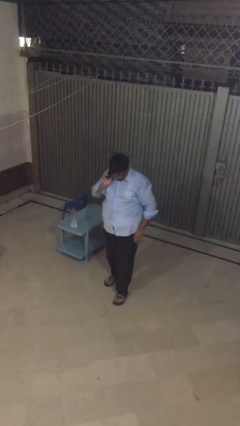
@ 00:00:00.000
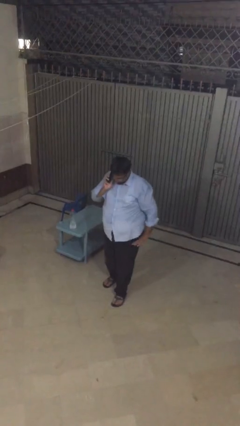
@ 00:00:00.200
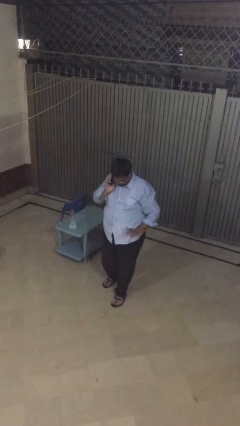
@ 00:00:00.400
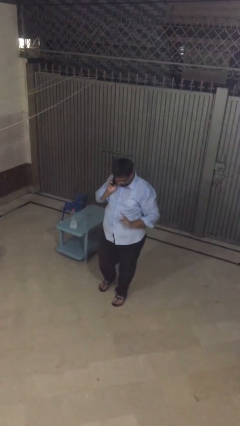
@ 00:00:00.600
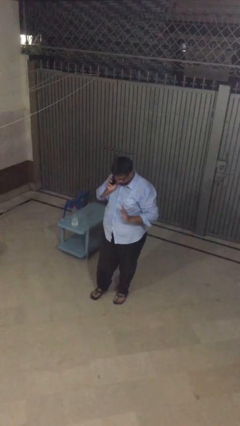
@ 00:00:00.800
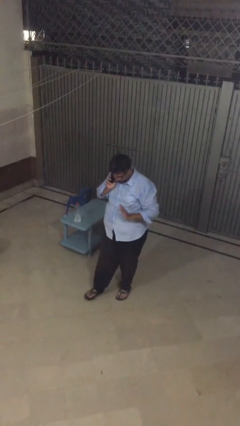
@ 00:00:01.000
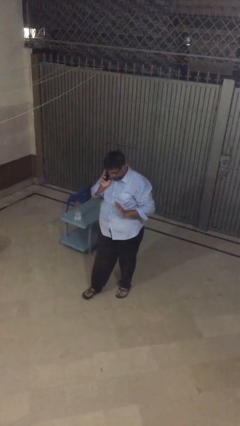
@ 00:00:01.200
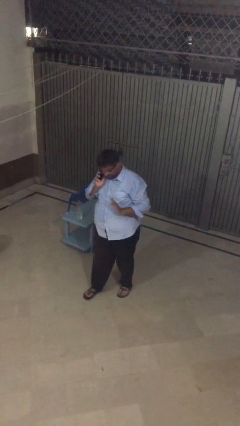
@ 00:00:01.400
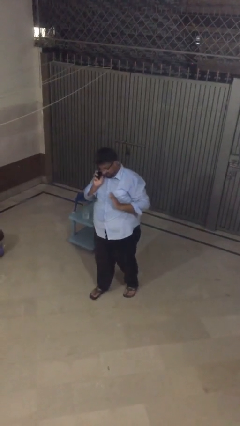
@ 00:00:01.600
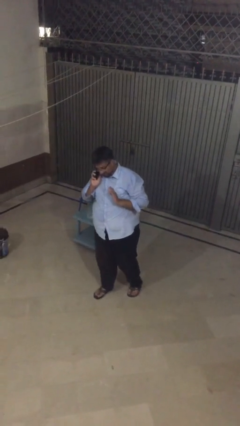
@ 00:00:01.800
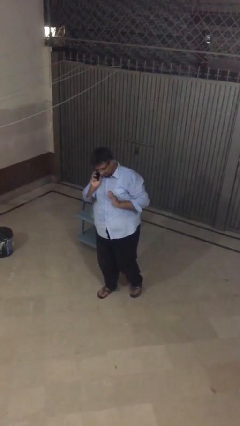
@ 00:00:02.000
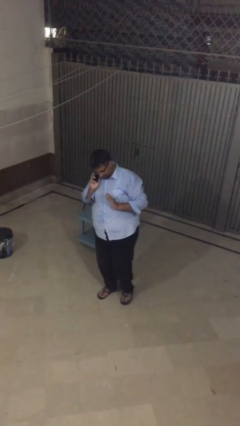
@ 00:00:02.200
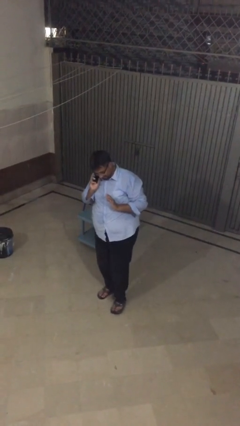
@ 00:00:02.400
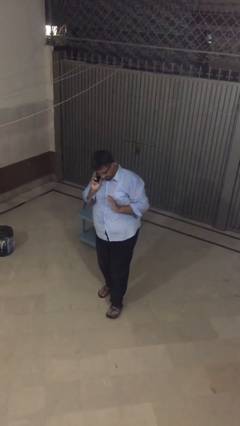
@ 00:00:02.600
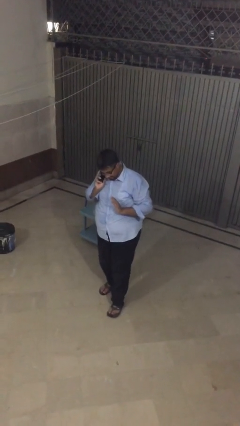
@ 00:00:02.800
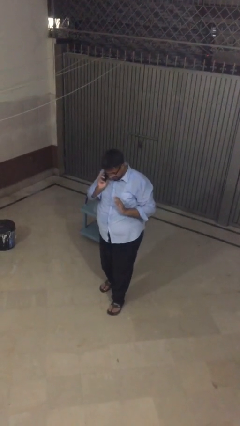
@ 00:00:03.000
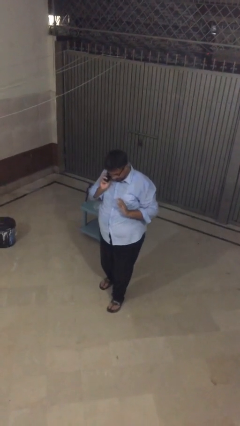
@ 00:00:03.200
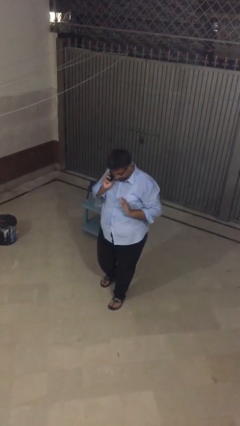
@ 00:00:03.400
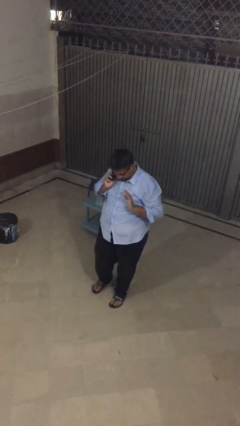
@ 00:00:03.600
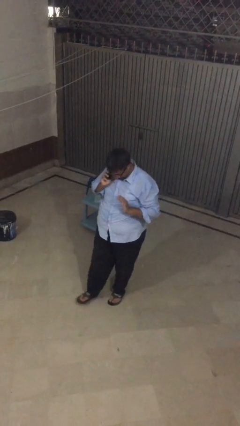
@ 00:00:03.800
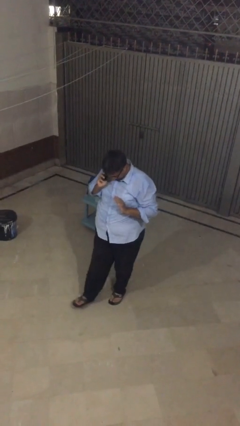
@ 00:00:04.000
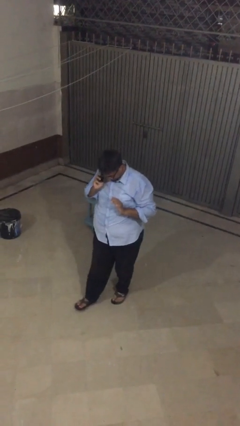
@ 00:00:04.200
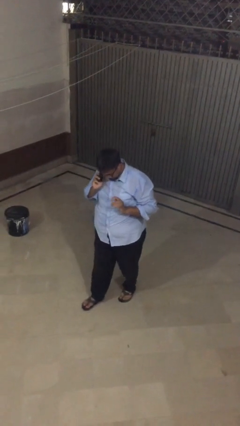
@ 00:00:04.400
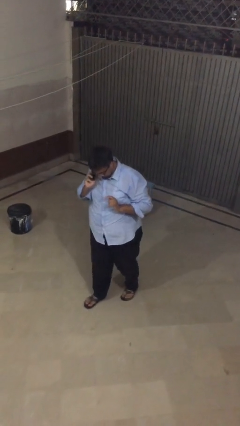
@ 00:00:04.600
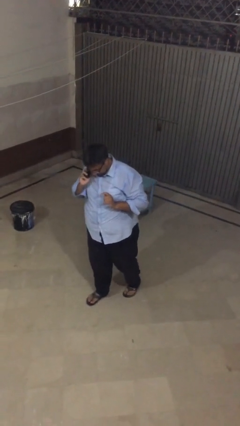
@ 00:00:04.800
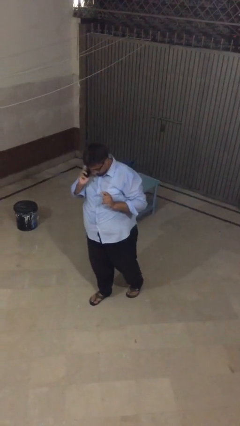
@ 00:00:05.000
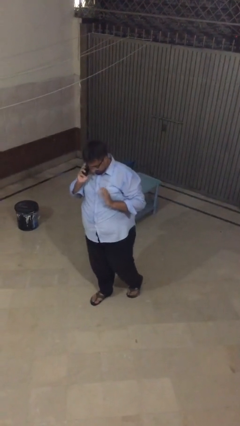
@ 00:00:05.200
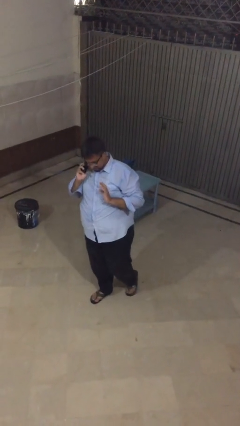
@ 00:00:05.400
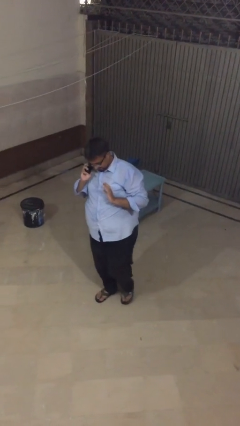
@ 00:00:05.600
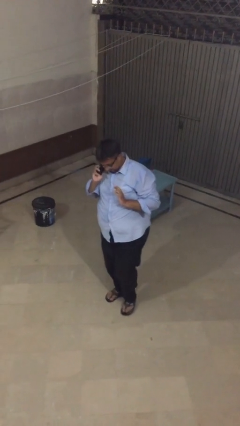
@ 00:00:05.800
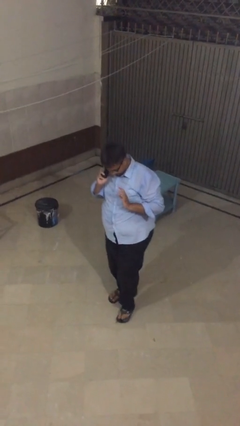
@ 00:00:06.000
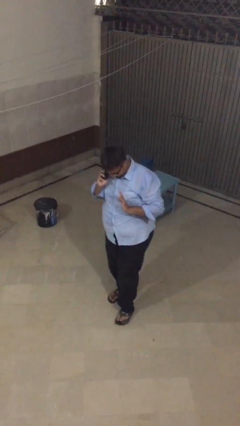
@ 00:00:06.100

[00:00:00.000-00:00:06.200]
person talks on phone

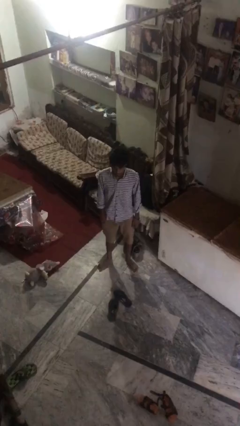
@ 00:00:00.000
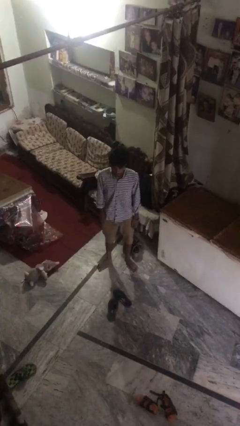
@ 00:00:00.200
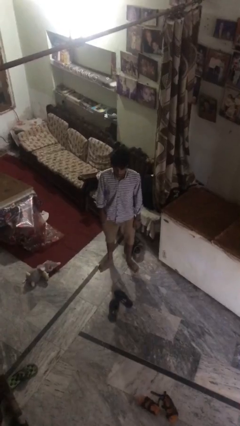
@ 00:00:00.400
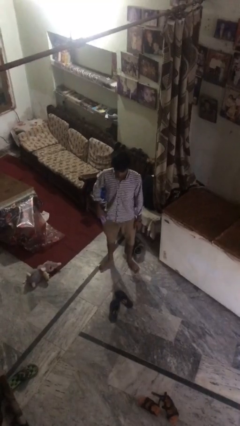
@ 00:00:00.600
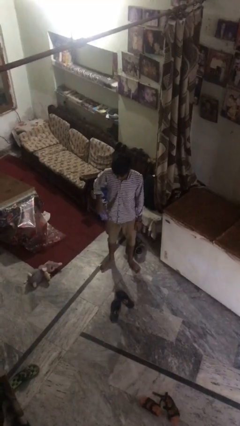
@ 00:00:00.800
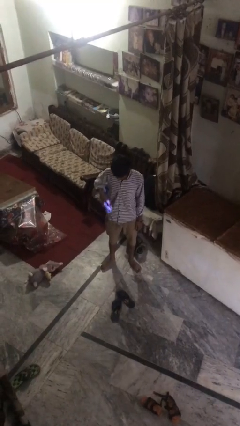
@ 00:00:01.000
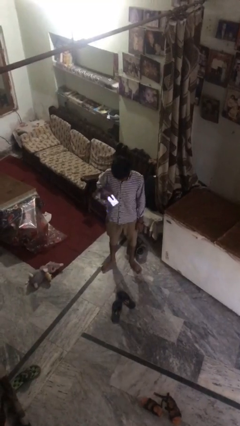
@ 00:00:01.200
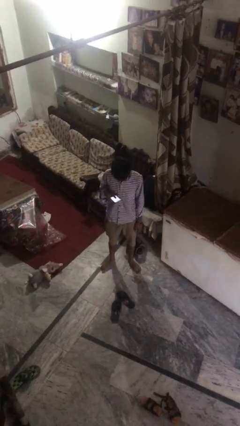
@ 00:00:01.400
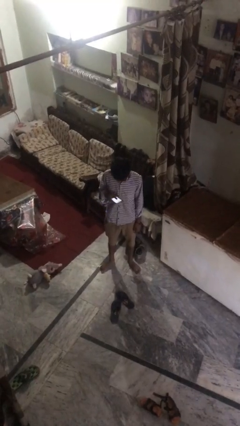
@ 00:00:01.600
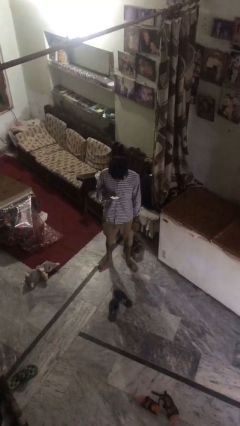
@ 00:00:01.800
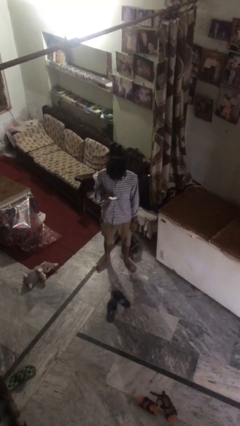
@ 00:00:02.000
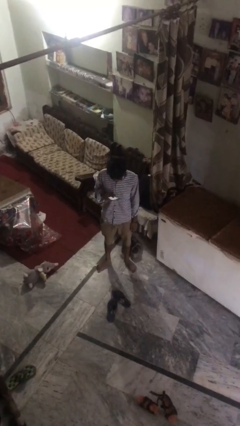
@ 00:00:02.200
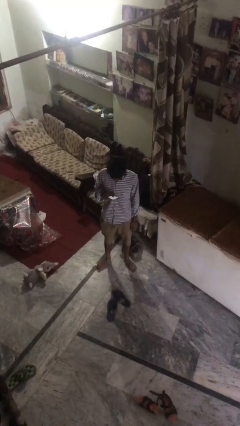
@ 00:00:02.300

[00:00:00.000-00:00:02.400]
person takes phone from pocket

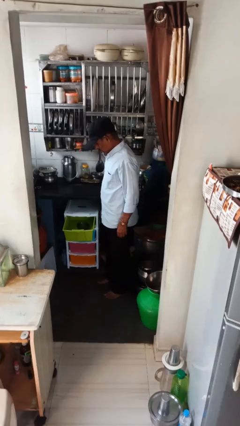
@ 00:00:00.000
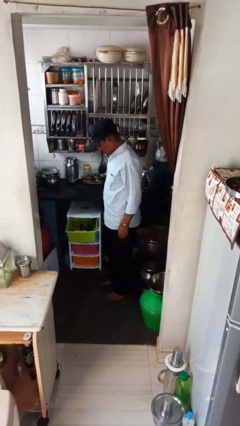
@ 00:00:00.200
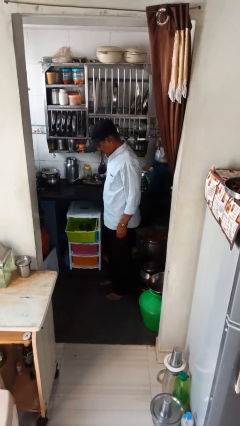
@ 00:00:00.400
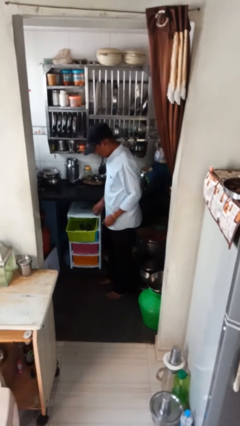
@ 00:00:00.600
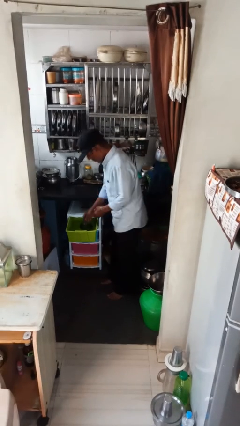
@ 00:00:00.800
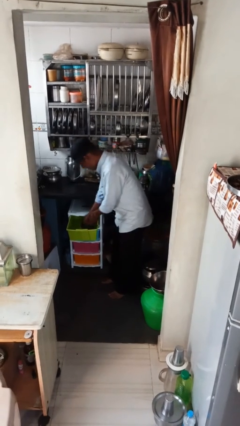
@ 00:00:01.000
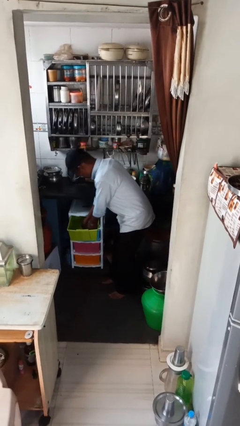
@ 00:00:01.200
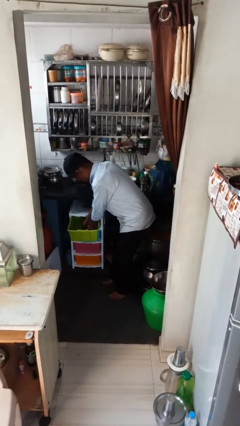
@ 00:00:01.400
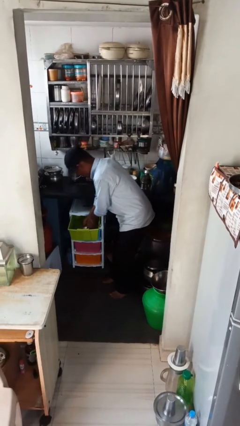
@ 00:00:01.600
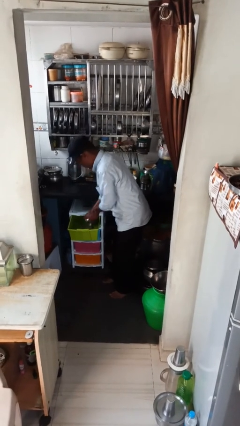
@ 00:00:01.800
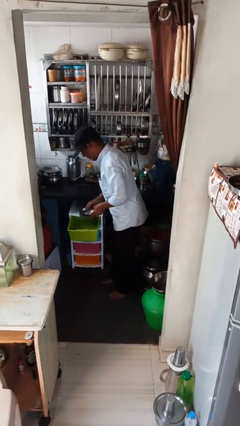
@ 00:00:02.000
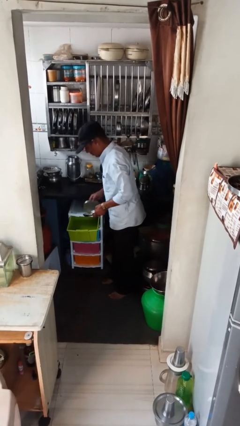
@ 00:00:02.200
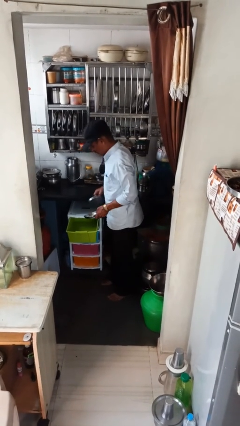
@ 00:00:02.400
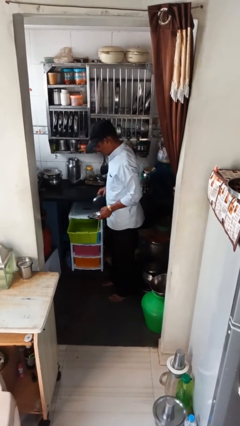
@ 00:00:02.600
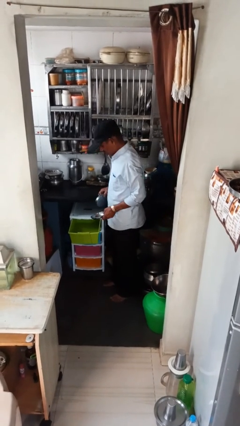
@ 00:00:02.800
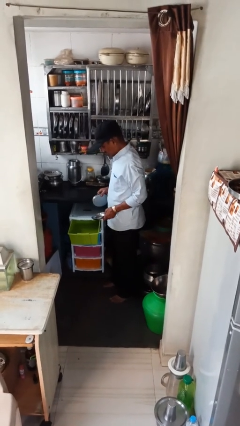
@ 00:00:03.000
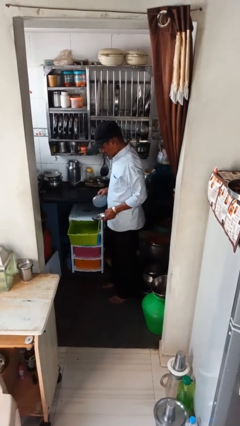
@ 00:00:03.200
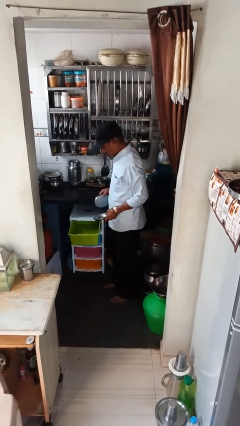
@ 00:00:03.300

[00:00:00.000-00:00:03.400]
person takes object from cabinet

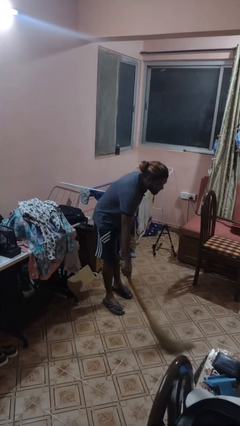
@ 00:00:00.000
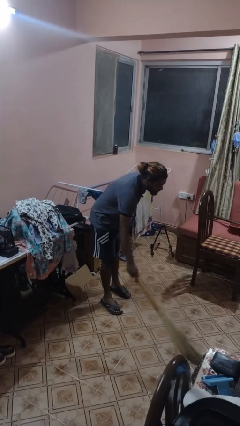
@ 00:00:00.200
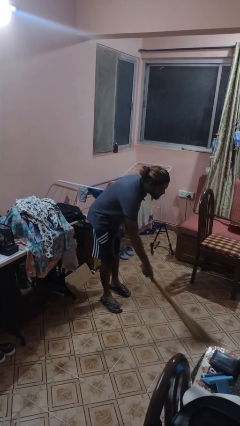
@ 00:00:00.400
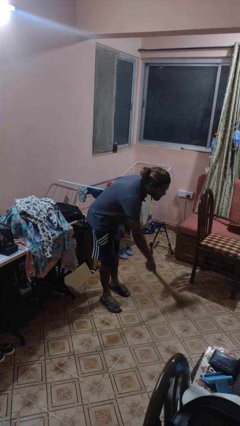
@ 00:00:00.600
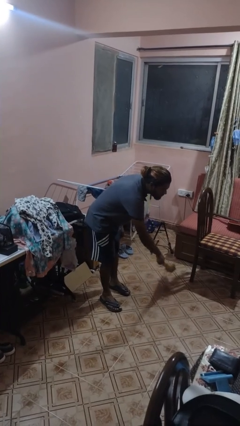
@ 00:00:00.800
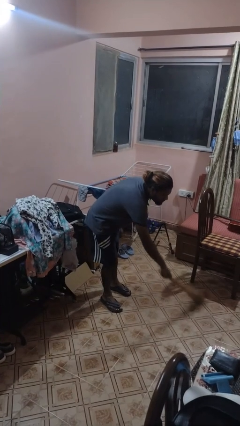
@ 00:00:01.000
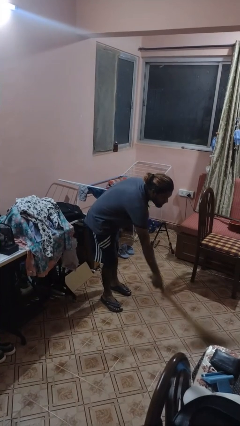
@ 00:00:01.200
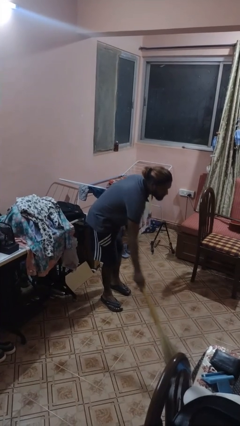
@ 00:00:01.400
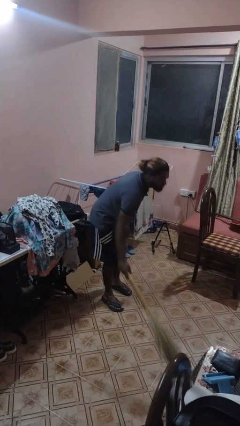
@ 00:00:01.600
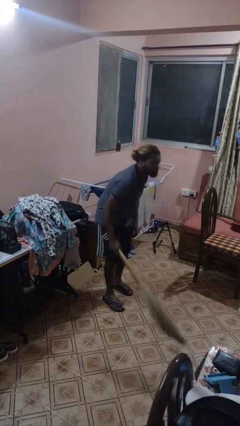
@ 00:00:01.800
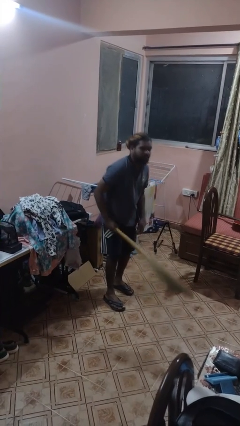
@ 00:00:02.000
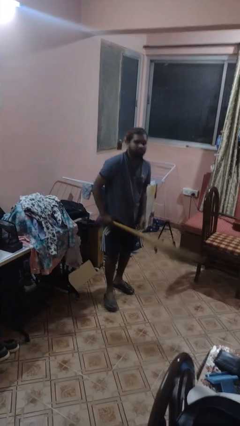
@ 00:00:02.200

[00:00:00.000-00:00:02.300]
person sweeps floor

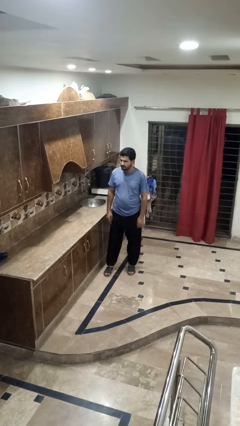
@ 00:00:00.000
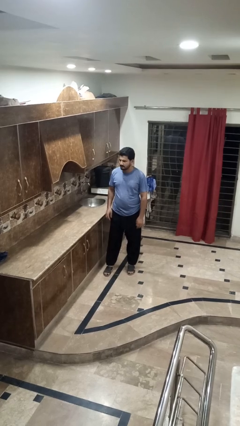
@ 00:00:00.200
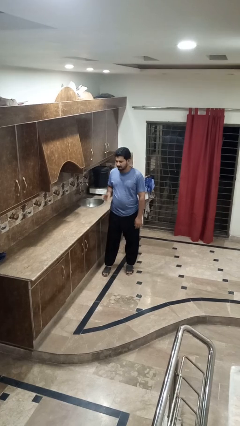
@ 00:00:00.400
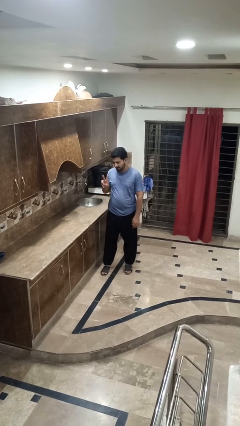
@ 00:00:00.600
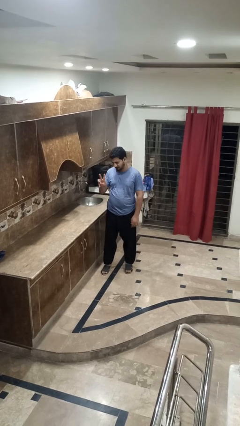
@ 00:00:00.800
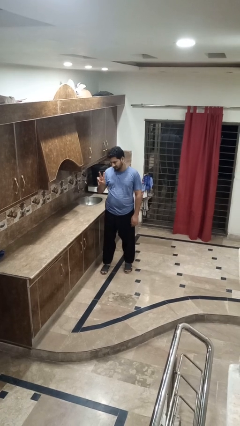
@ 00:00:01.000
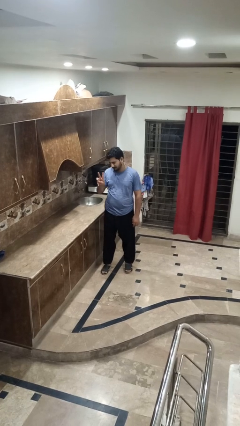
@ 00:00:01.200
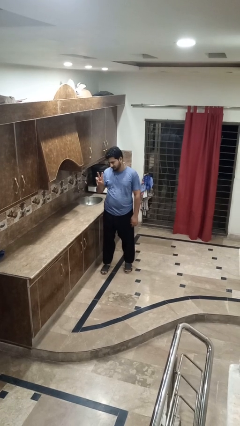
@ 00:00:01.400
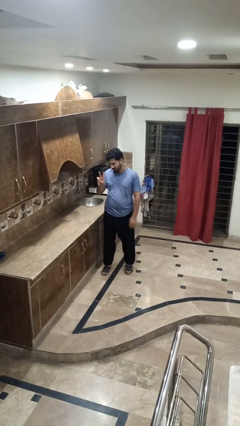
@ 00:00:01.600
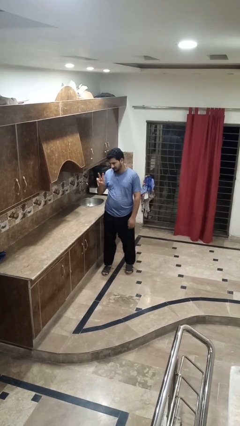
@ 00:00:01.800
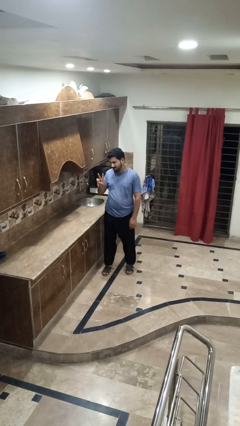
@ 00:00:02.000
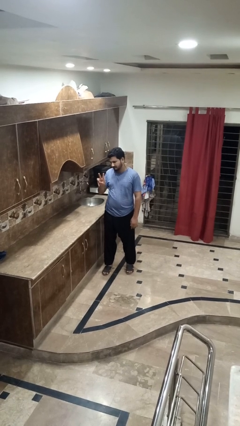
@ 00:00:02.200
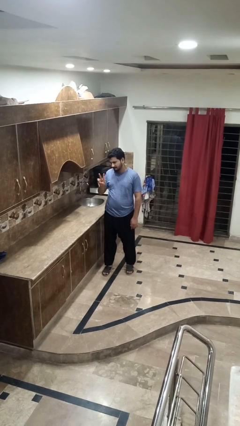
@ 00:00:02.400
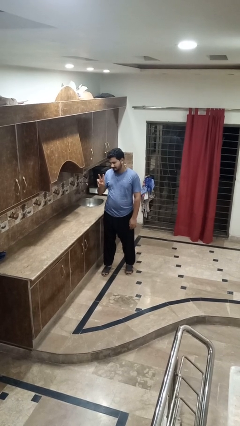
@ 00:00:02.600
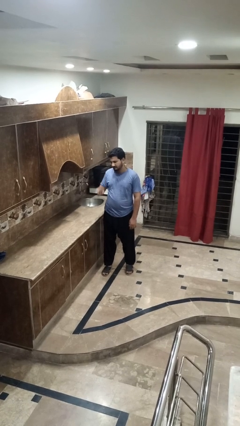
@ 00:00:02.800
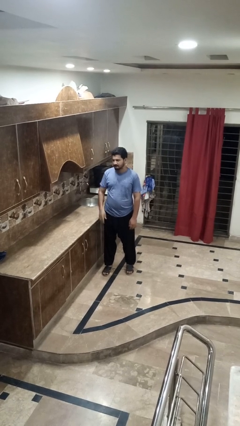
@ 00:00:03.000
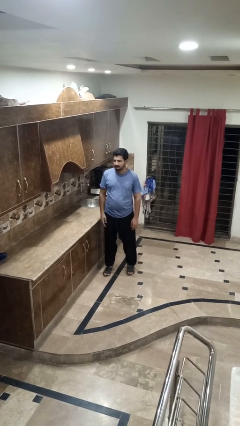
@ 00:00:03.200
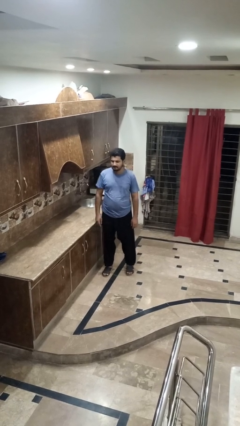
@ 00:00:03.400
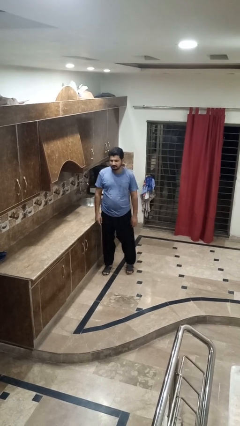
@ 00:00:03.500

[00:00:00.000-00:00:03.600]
person gestures peace
